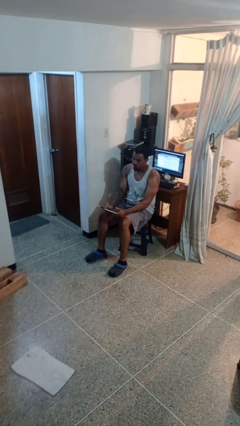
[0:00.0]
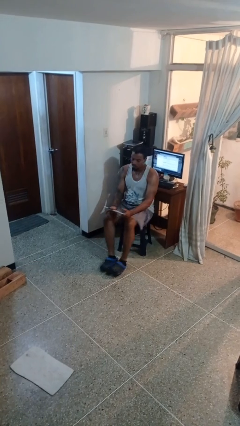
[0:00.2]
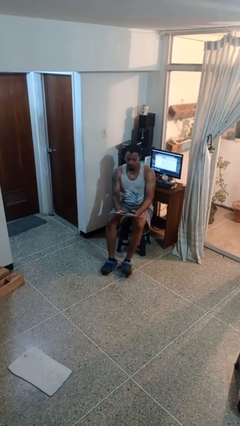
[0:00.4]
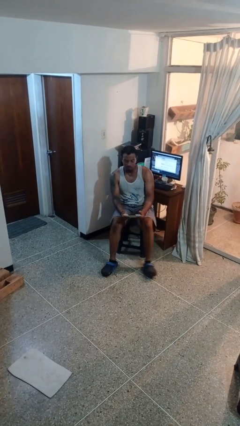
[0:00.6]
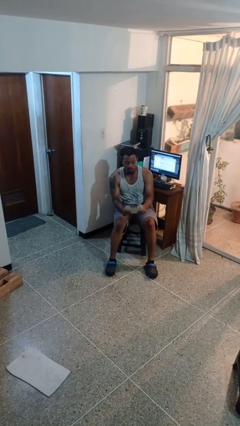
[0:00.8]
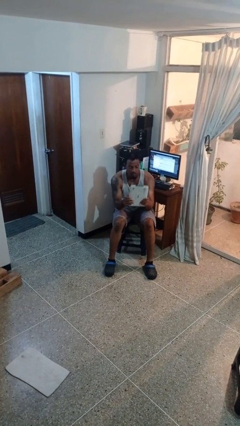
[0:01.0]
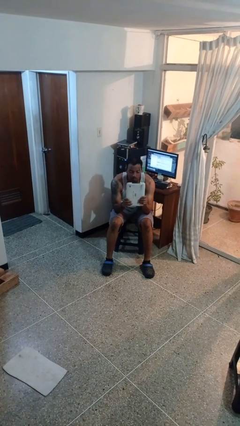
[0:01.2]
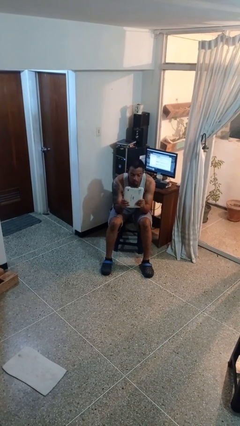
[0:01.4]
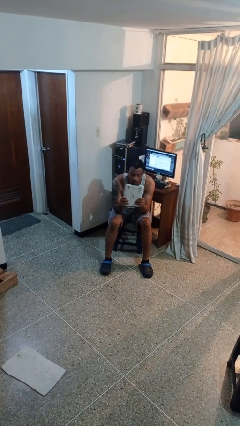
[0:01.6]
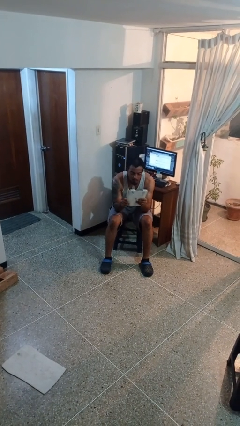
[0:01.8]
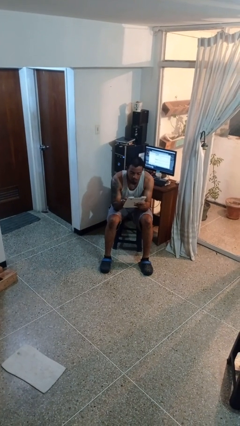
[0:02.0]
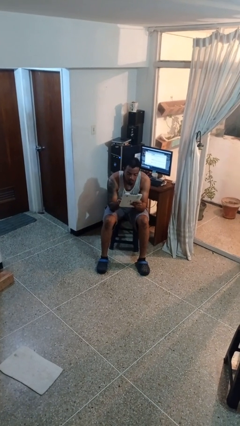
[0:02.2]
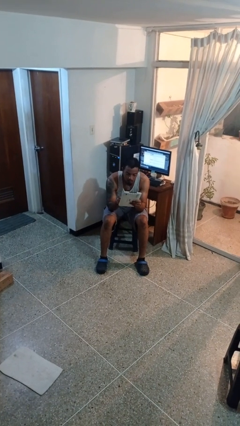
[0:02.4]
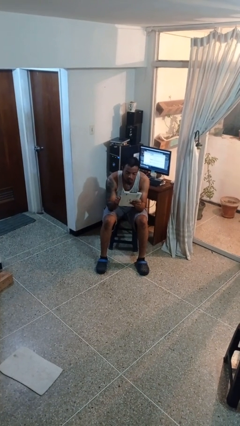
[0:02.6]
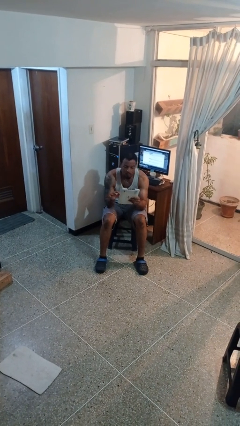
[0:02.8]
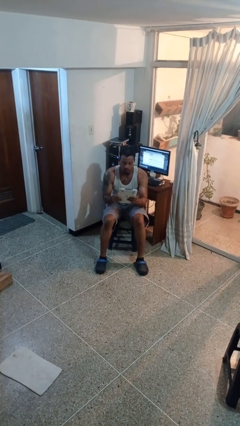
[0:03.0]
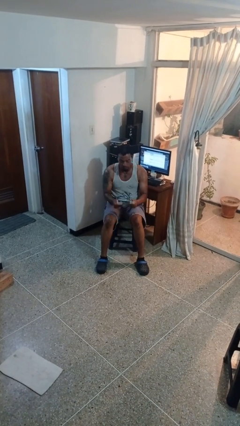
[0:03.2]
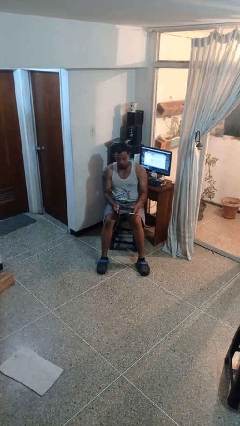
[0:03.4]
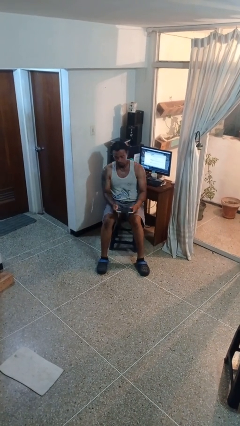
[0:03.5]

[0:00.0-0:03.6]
person interacts with tablet

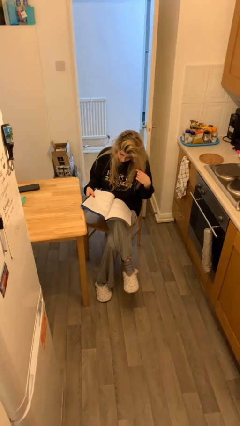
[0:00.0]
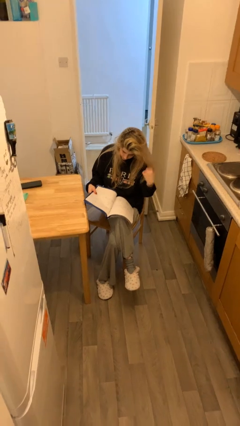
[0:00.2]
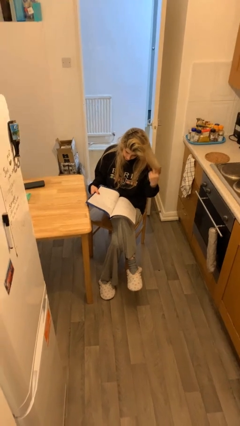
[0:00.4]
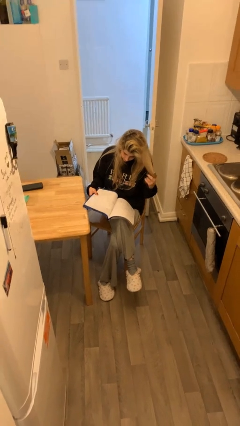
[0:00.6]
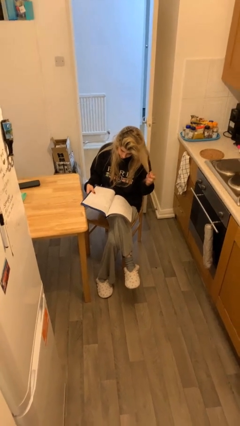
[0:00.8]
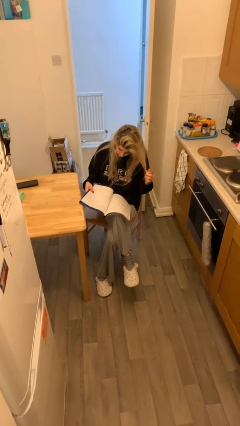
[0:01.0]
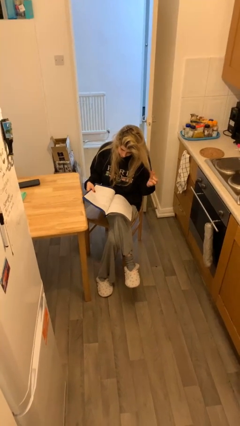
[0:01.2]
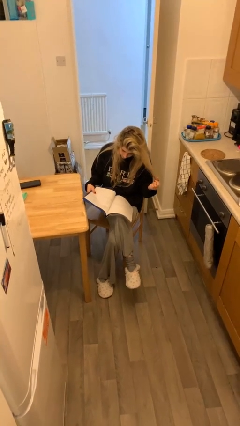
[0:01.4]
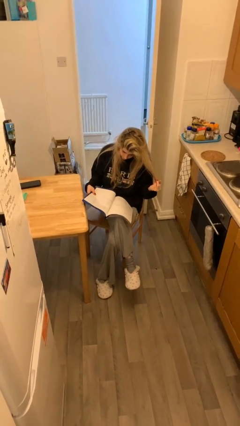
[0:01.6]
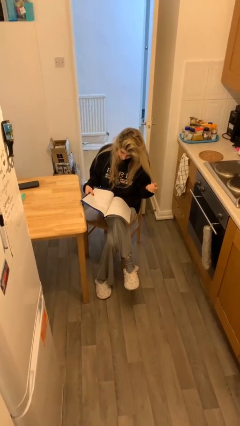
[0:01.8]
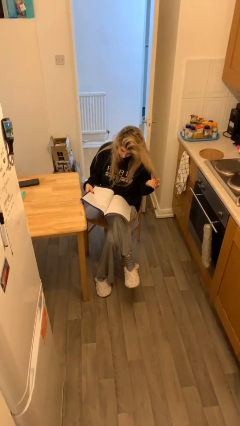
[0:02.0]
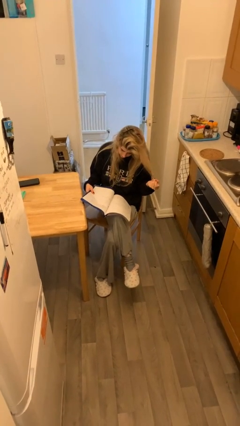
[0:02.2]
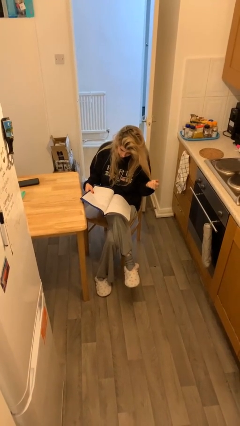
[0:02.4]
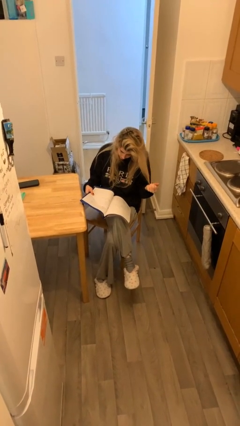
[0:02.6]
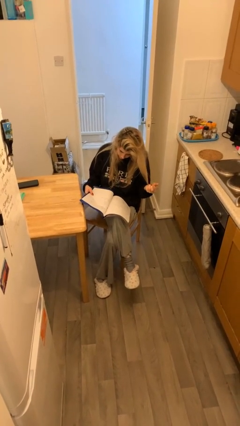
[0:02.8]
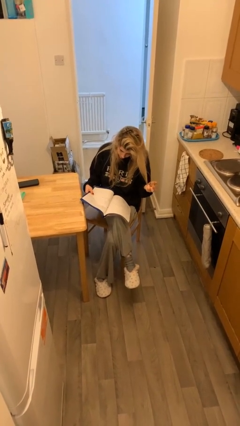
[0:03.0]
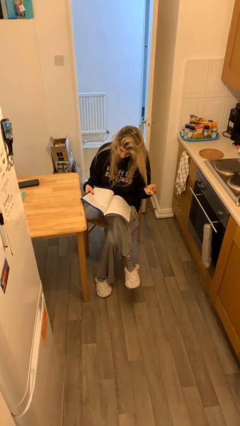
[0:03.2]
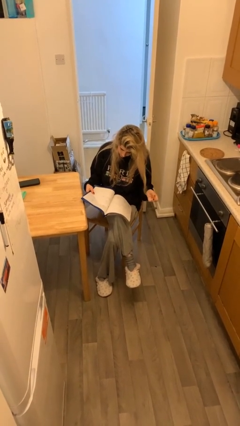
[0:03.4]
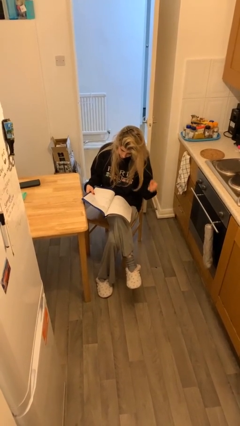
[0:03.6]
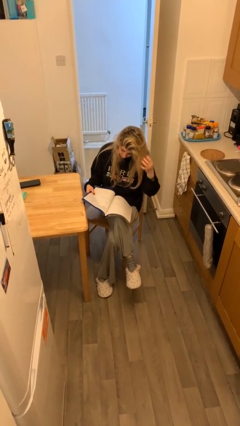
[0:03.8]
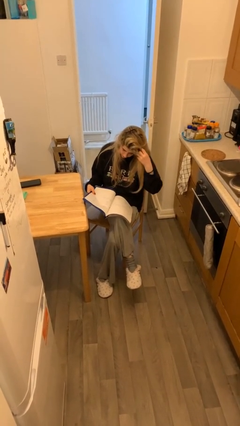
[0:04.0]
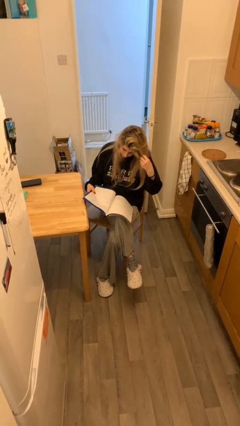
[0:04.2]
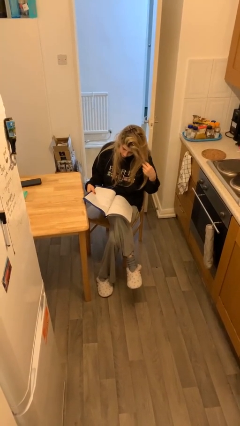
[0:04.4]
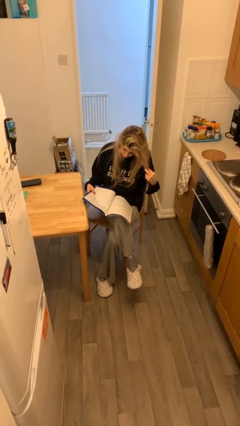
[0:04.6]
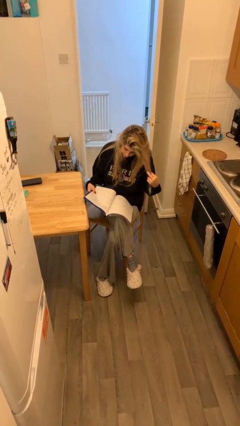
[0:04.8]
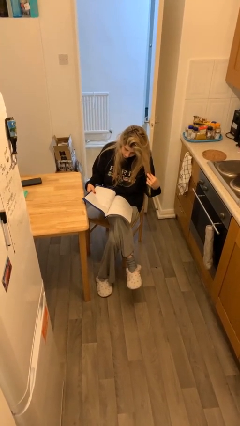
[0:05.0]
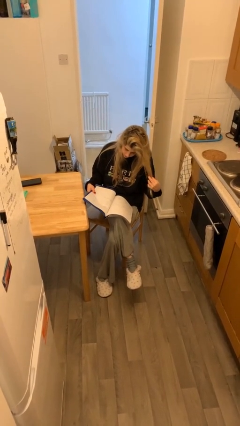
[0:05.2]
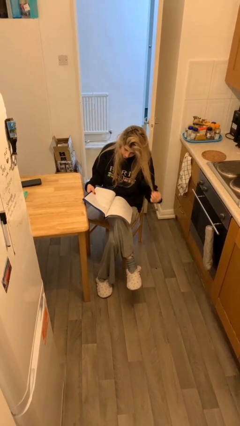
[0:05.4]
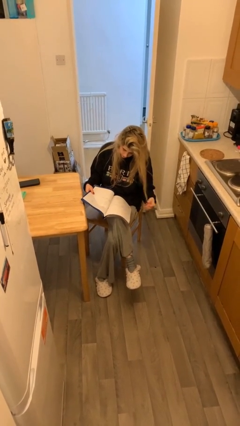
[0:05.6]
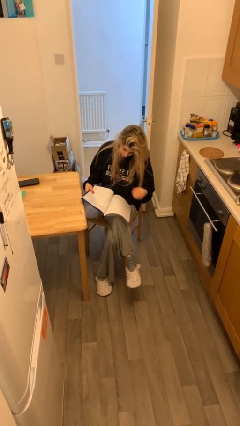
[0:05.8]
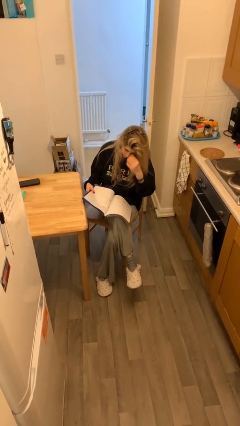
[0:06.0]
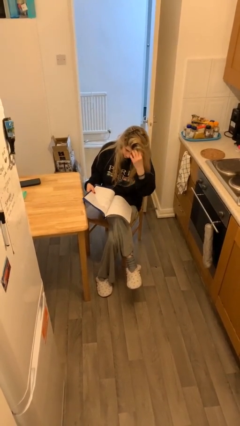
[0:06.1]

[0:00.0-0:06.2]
person reads document

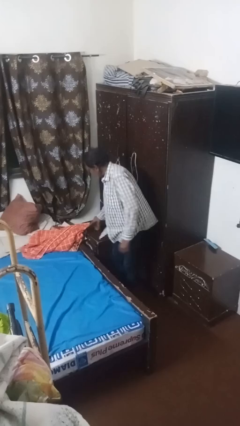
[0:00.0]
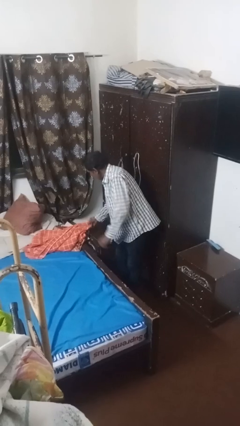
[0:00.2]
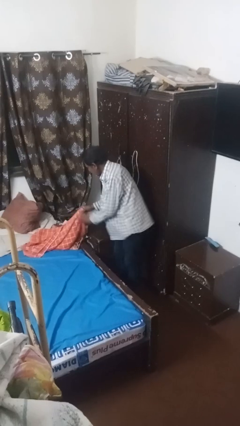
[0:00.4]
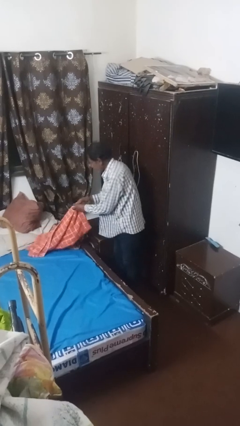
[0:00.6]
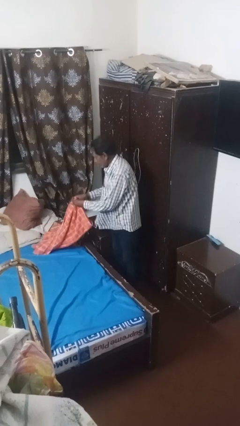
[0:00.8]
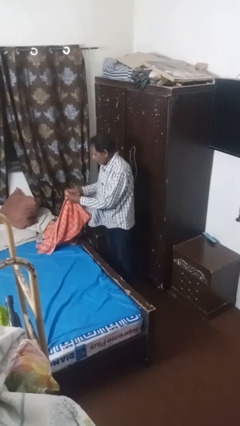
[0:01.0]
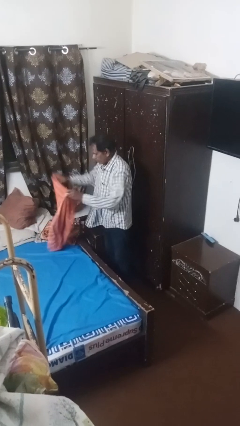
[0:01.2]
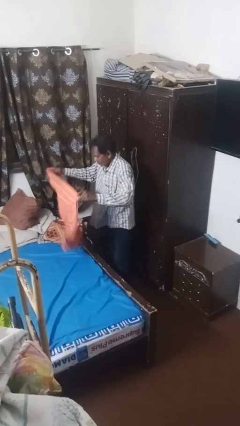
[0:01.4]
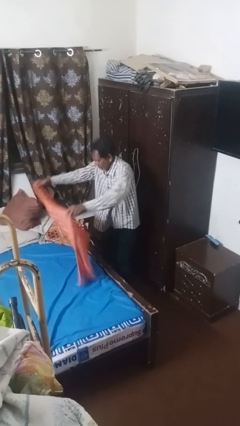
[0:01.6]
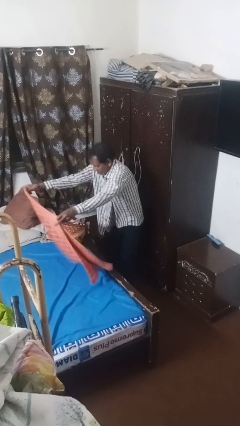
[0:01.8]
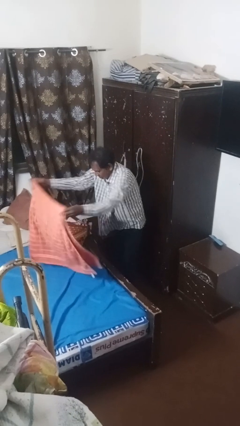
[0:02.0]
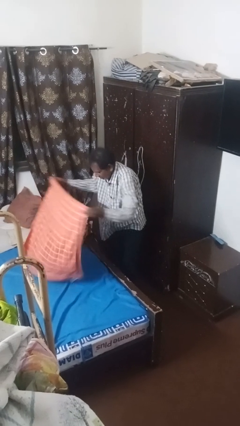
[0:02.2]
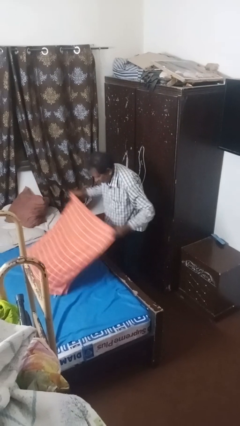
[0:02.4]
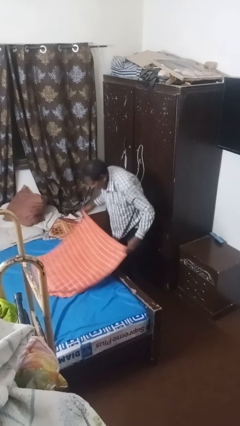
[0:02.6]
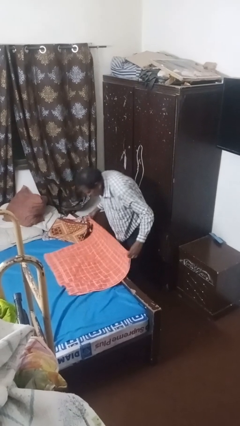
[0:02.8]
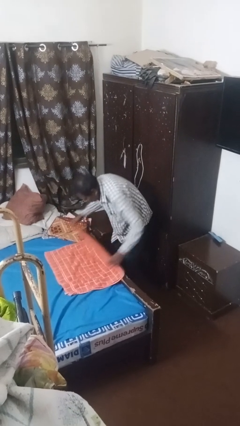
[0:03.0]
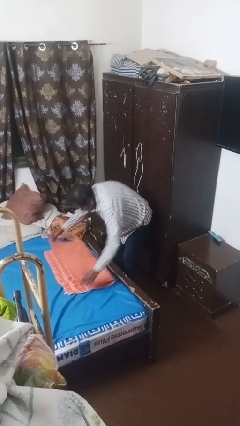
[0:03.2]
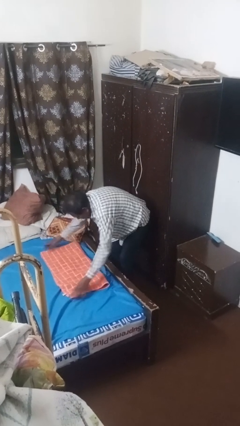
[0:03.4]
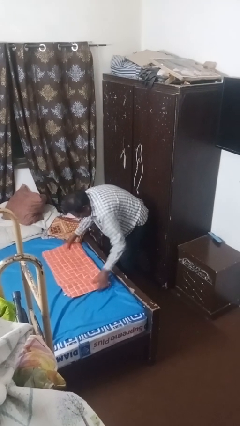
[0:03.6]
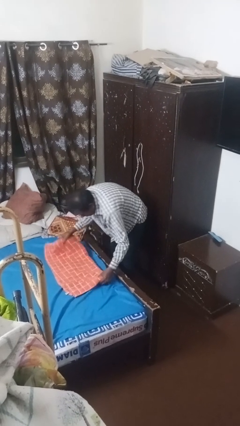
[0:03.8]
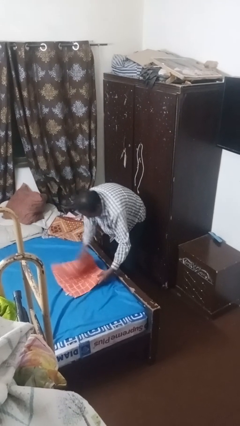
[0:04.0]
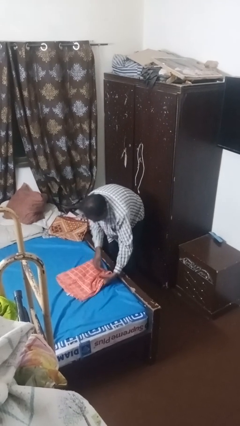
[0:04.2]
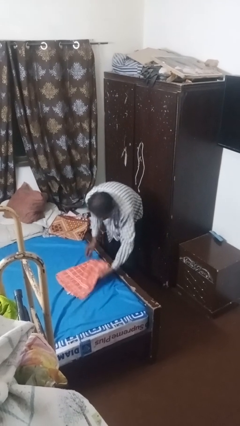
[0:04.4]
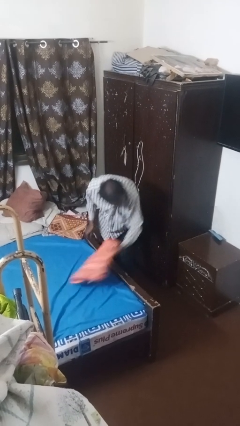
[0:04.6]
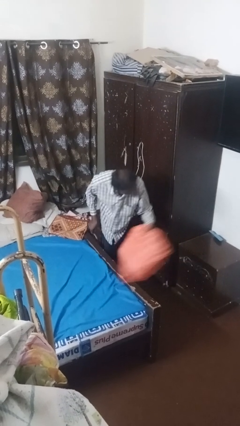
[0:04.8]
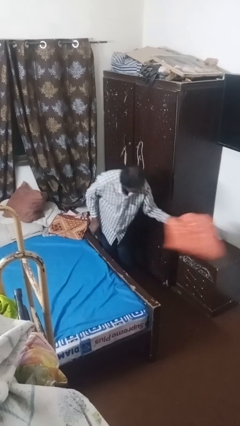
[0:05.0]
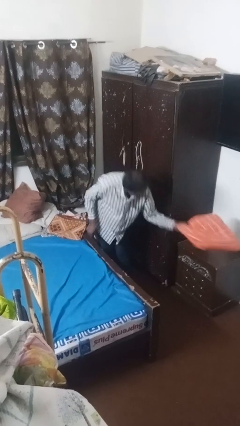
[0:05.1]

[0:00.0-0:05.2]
person folds towel

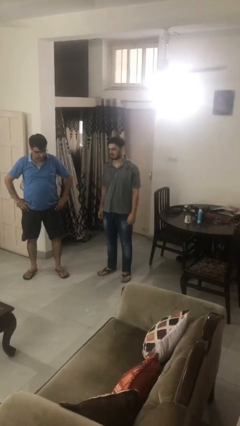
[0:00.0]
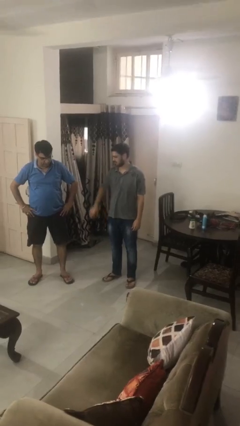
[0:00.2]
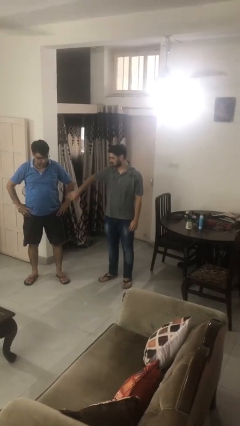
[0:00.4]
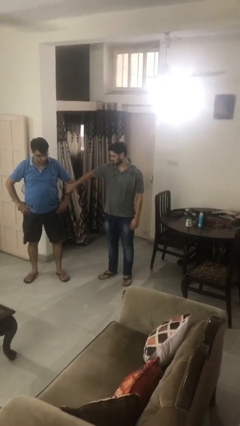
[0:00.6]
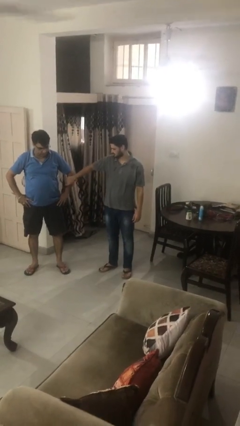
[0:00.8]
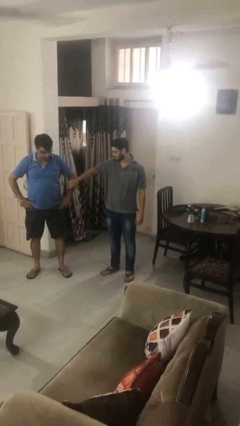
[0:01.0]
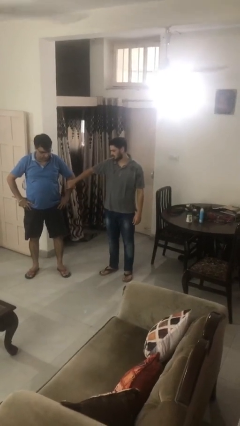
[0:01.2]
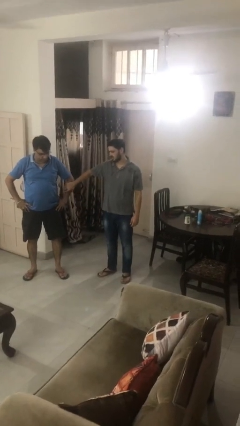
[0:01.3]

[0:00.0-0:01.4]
person grabs person by forearm

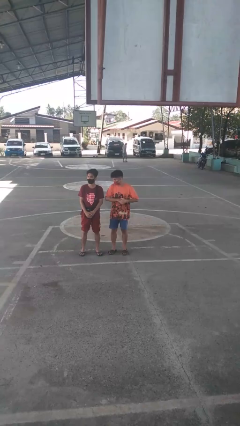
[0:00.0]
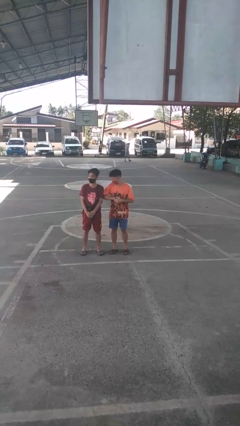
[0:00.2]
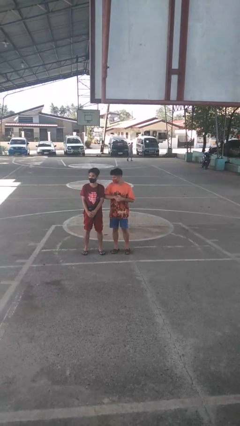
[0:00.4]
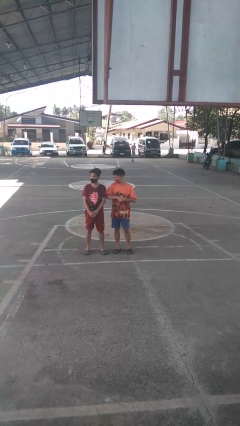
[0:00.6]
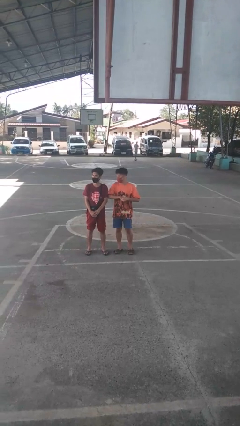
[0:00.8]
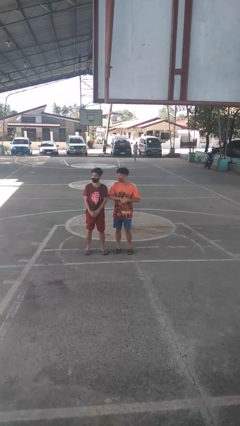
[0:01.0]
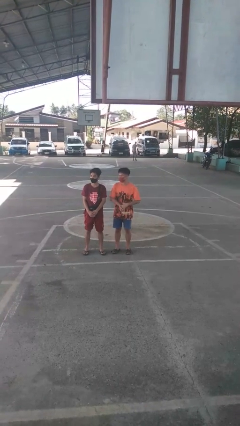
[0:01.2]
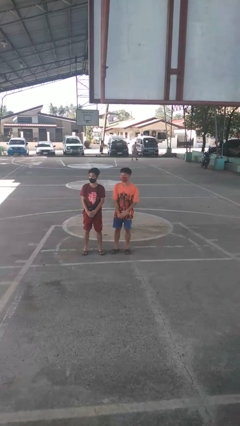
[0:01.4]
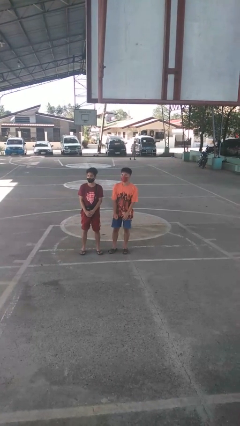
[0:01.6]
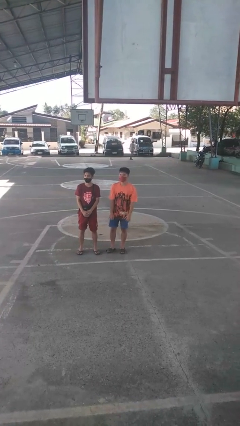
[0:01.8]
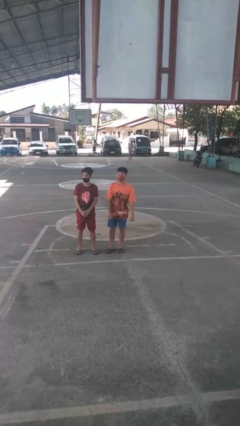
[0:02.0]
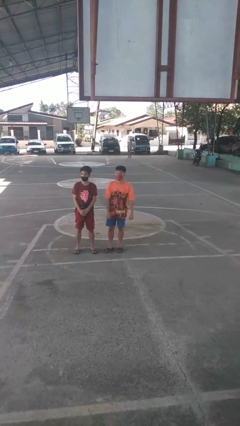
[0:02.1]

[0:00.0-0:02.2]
person nudges person with elbow
